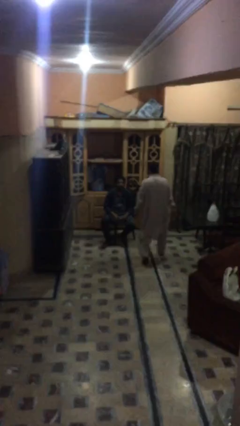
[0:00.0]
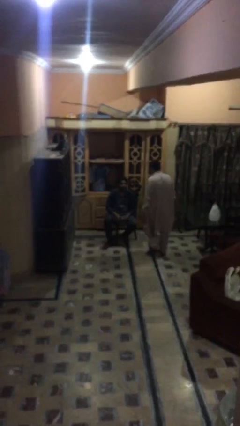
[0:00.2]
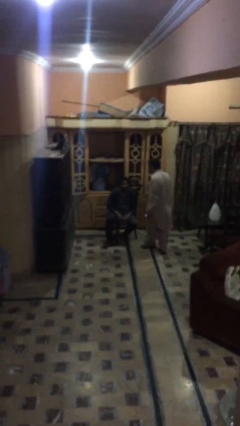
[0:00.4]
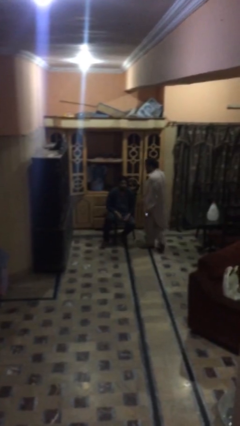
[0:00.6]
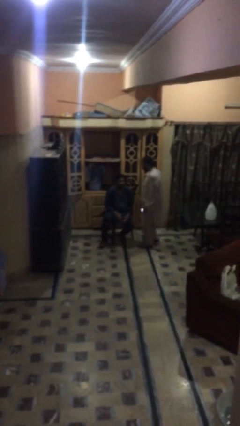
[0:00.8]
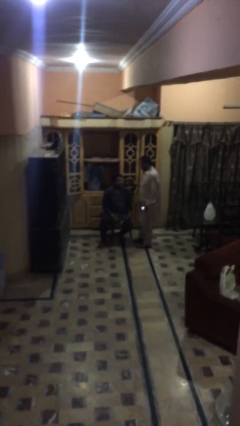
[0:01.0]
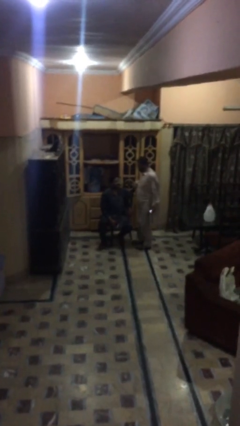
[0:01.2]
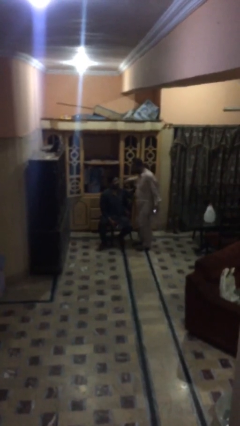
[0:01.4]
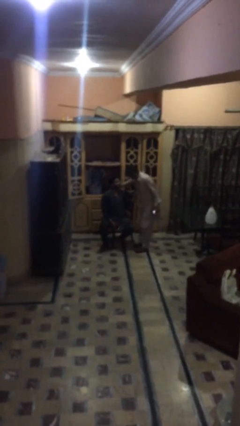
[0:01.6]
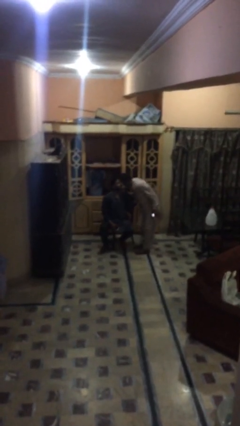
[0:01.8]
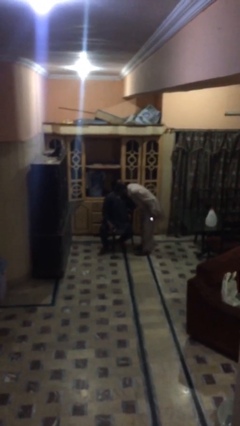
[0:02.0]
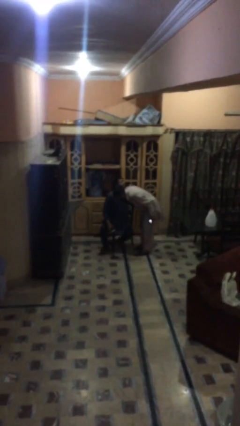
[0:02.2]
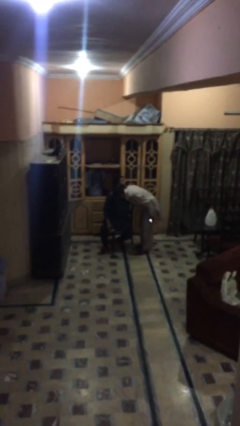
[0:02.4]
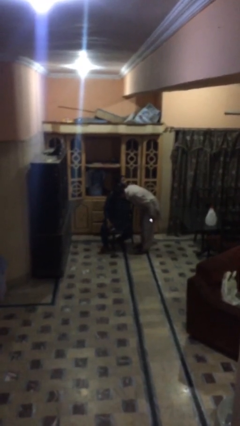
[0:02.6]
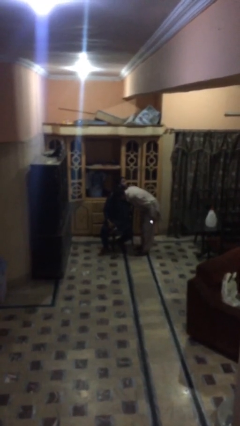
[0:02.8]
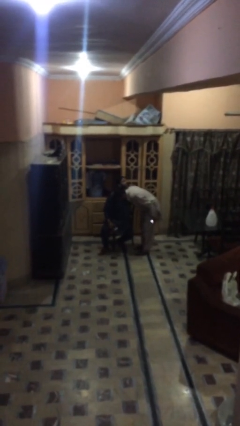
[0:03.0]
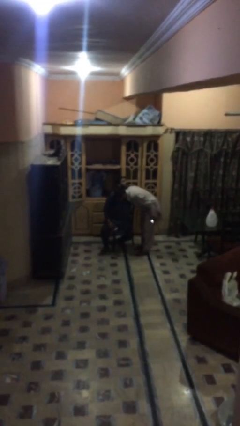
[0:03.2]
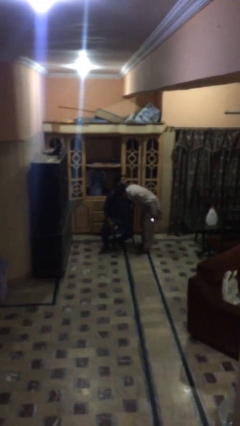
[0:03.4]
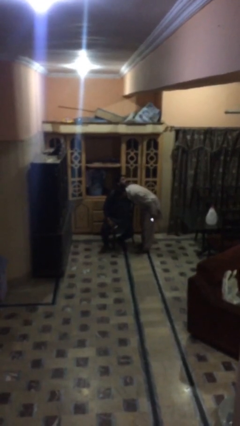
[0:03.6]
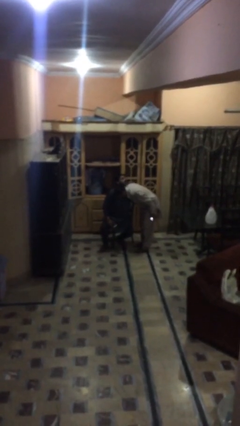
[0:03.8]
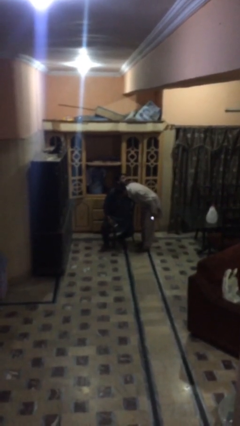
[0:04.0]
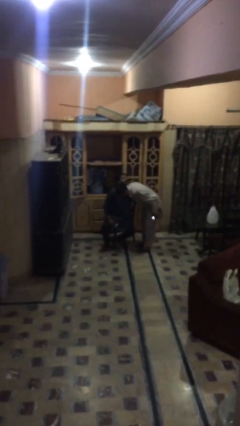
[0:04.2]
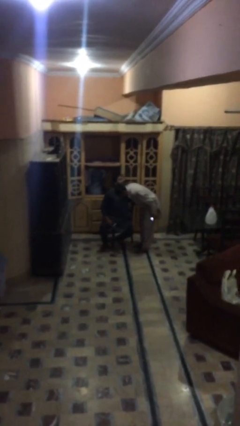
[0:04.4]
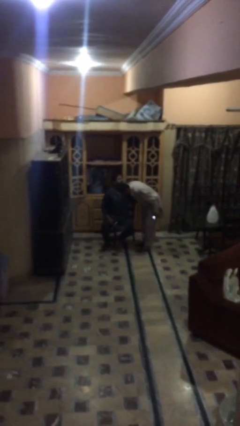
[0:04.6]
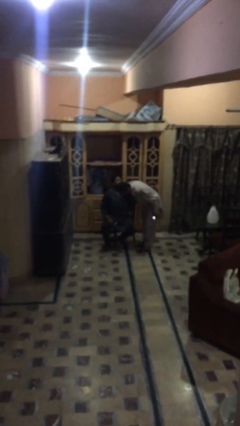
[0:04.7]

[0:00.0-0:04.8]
person embraces person

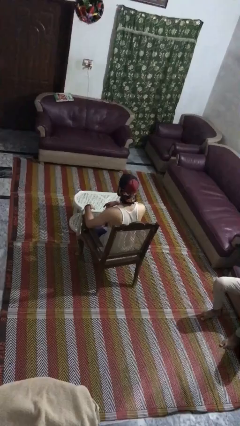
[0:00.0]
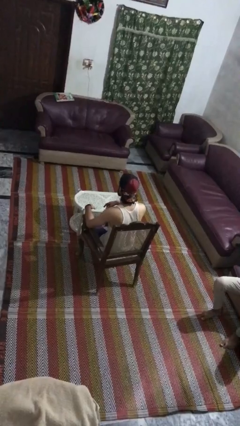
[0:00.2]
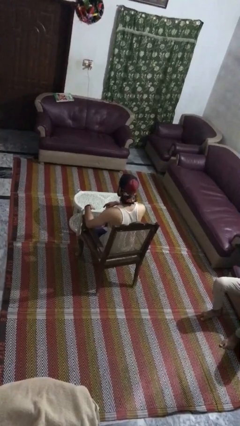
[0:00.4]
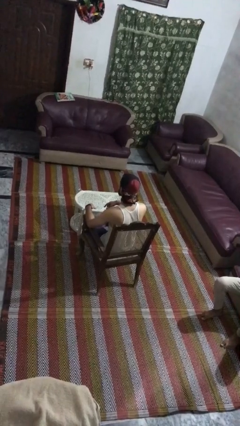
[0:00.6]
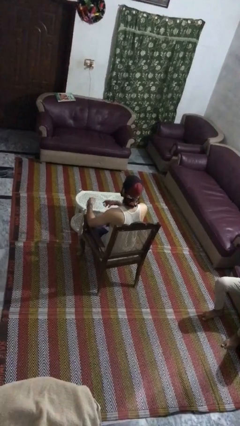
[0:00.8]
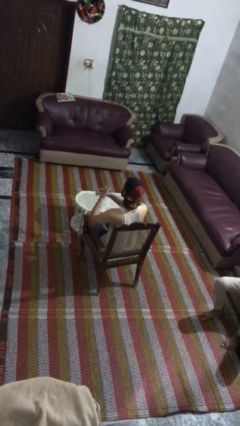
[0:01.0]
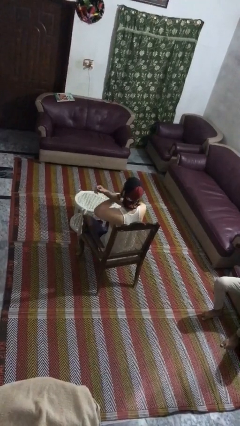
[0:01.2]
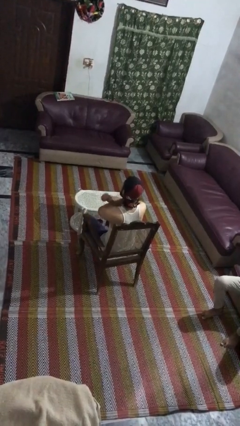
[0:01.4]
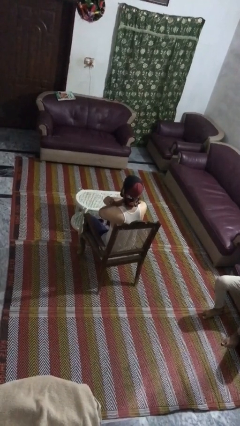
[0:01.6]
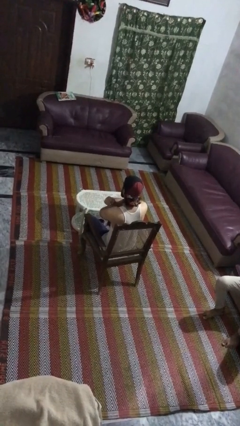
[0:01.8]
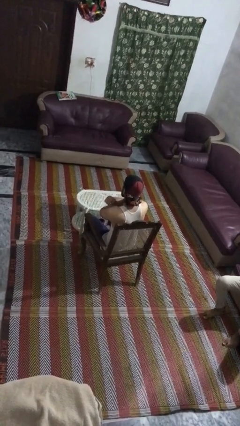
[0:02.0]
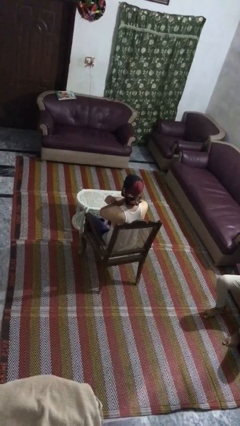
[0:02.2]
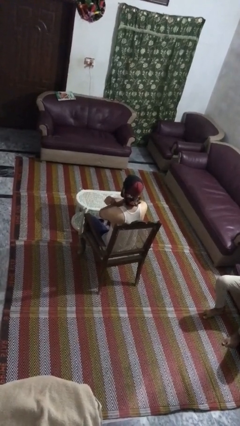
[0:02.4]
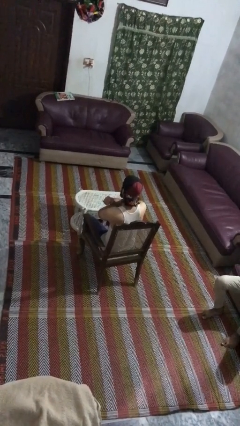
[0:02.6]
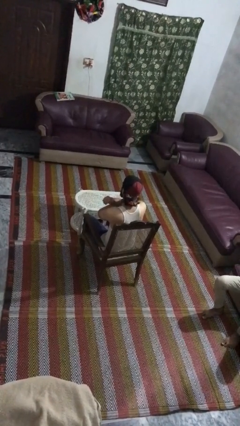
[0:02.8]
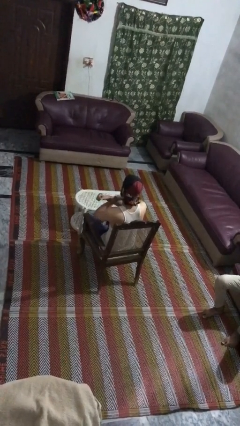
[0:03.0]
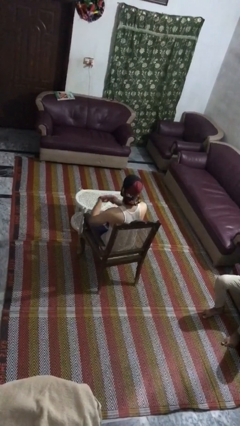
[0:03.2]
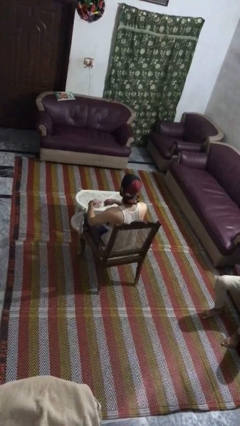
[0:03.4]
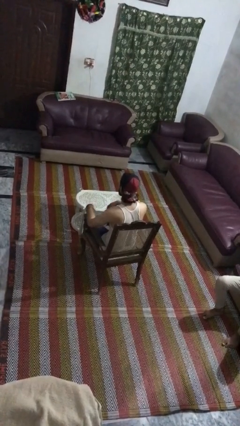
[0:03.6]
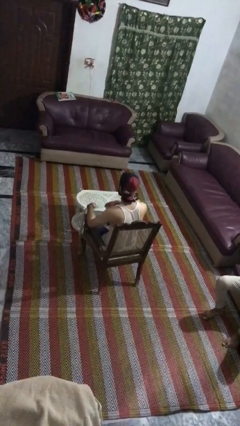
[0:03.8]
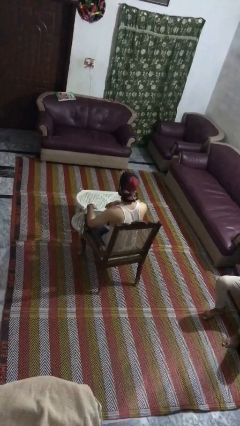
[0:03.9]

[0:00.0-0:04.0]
person gestures arms x

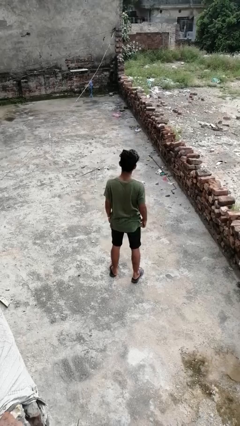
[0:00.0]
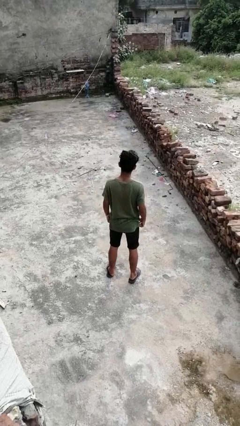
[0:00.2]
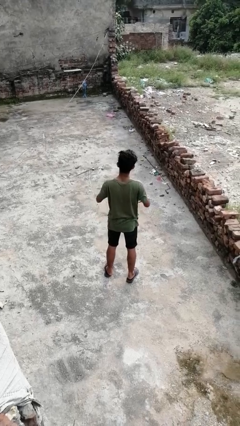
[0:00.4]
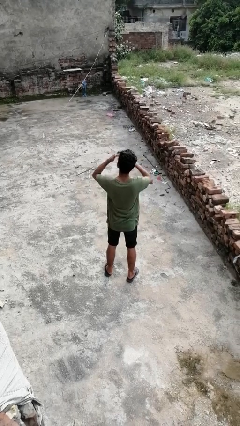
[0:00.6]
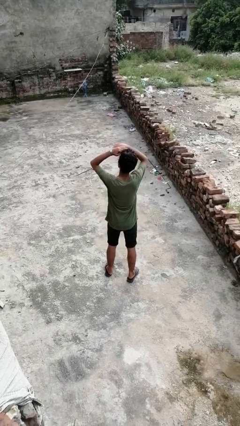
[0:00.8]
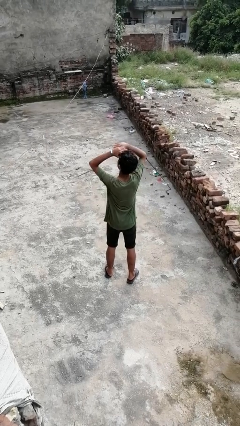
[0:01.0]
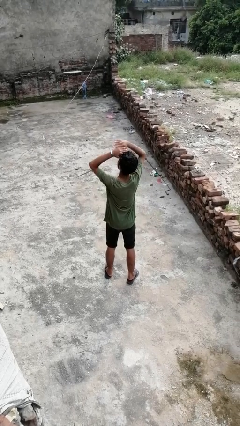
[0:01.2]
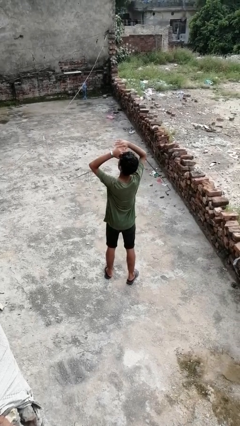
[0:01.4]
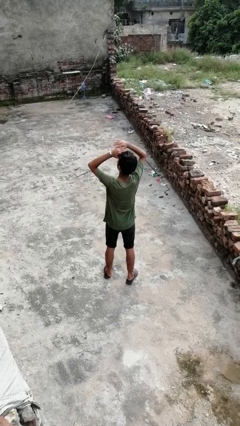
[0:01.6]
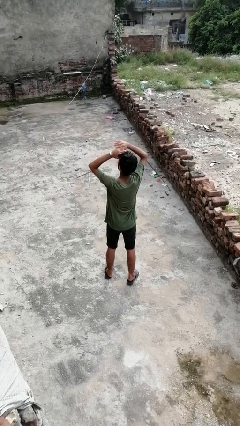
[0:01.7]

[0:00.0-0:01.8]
person shades eyes

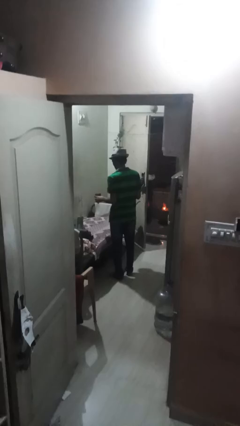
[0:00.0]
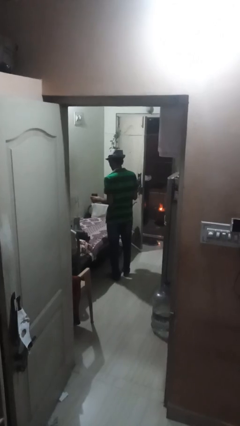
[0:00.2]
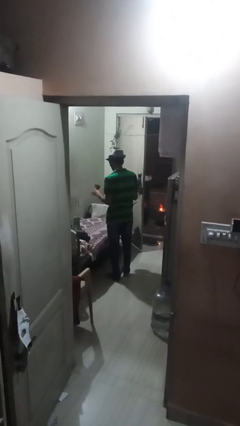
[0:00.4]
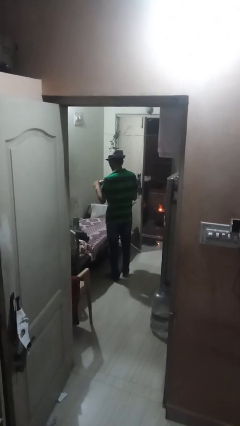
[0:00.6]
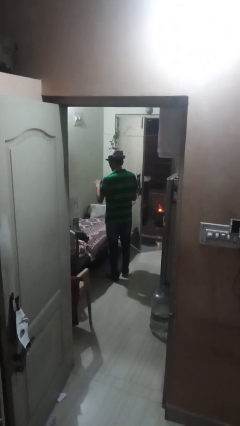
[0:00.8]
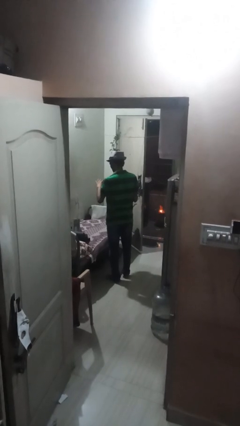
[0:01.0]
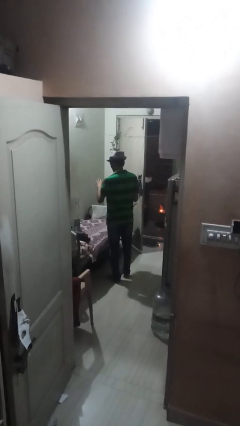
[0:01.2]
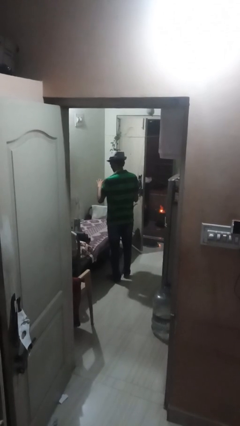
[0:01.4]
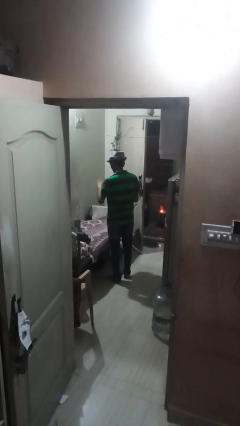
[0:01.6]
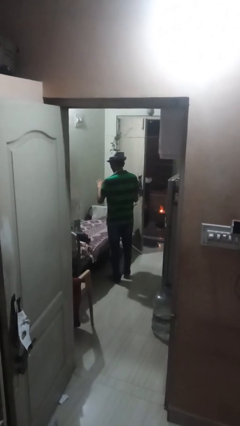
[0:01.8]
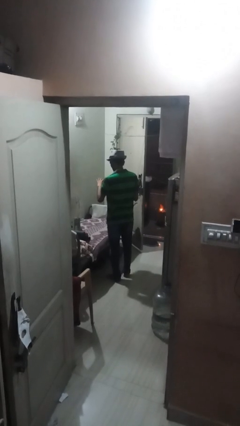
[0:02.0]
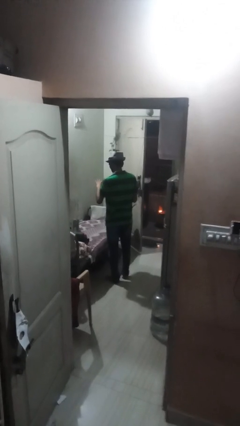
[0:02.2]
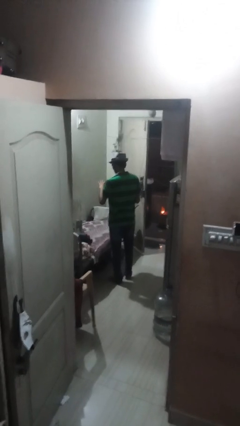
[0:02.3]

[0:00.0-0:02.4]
person pours coffee into mug

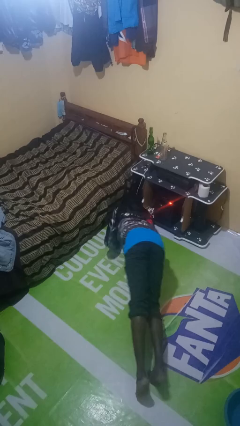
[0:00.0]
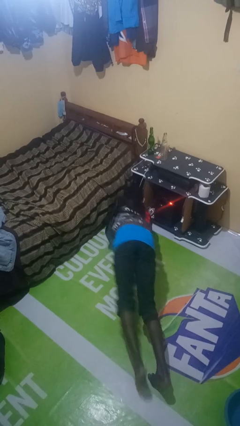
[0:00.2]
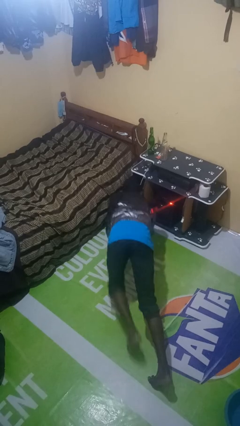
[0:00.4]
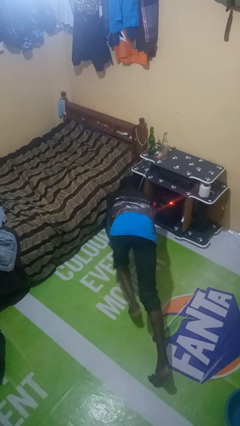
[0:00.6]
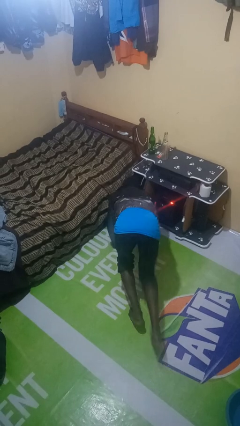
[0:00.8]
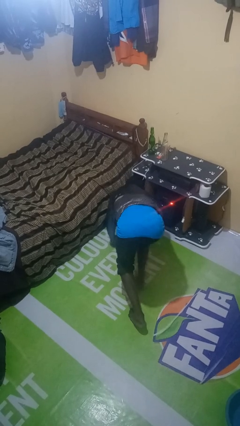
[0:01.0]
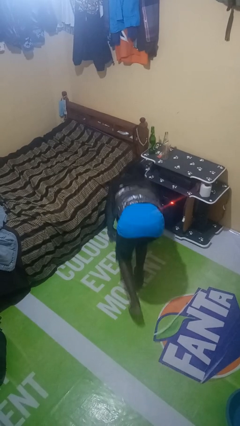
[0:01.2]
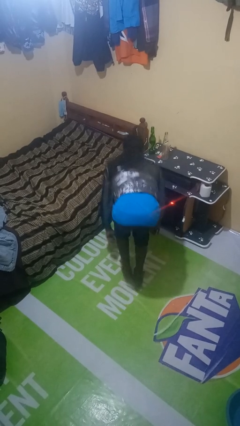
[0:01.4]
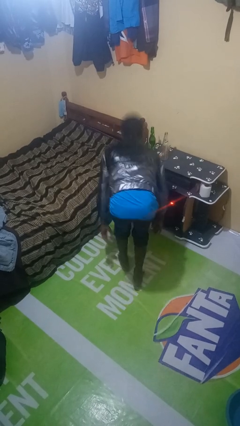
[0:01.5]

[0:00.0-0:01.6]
person stands up from floor

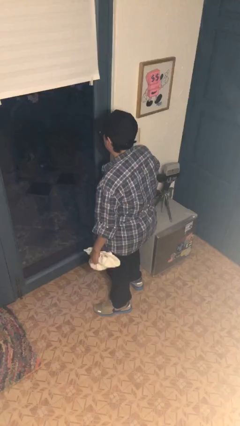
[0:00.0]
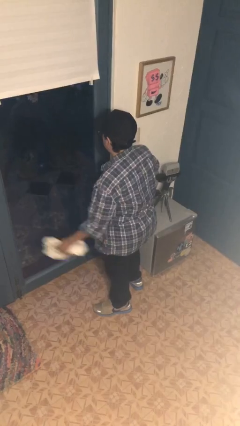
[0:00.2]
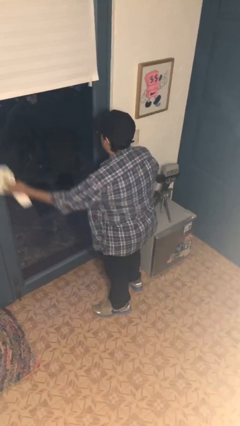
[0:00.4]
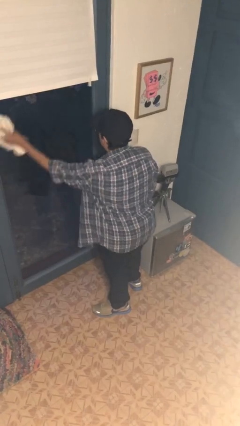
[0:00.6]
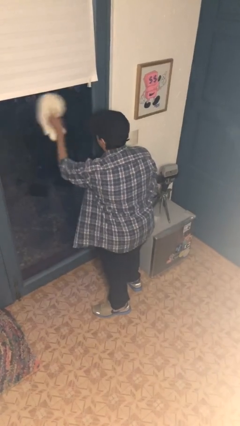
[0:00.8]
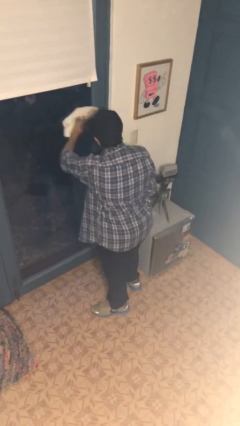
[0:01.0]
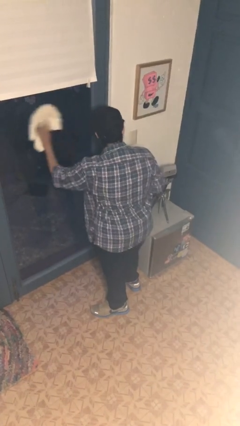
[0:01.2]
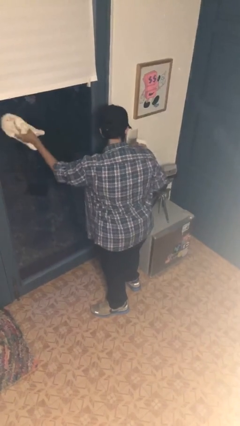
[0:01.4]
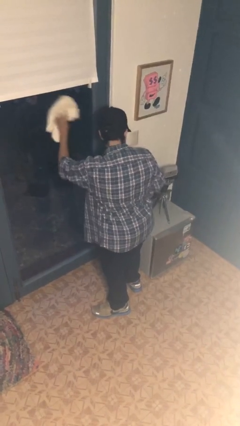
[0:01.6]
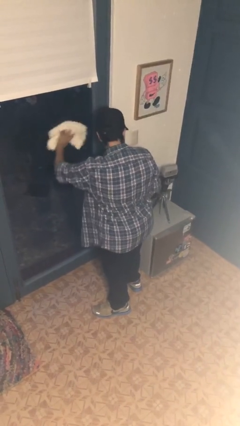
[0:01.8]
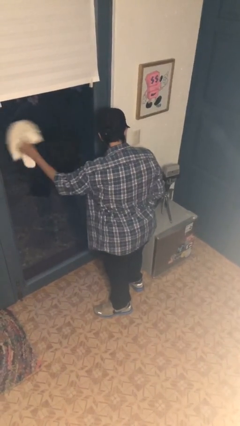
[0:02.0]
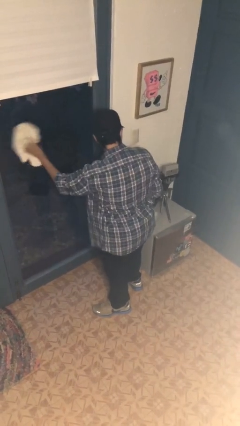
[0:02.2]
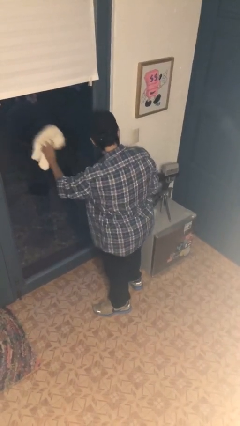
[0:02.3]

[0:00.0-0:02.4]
person washes window
